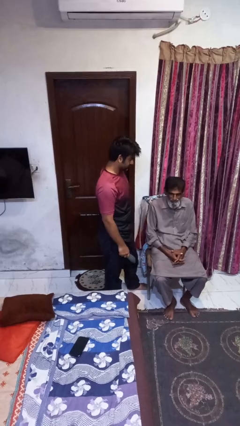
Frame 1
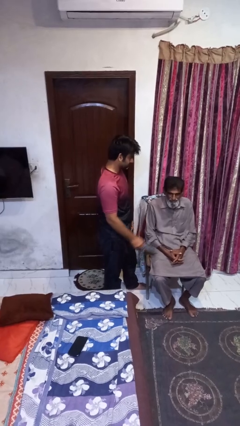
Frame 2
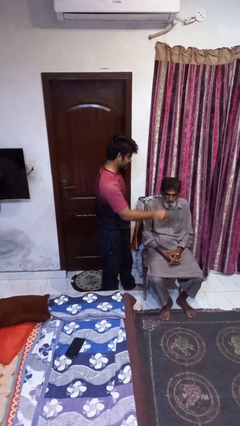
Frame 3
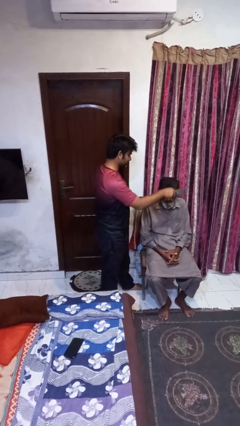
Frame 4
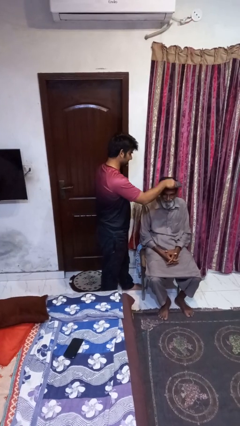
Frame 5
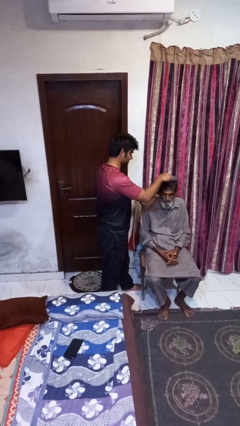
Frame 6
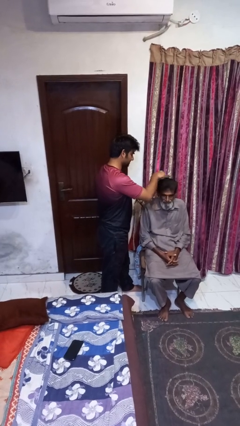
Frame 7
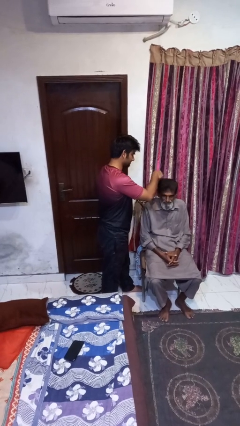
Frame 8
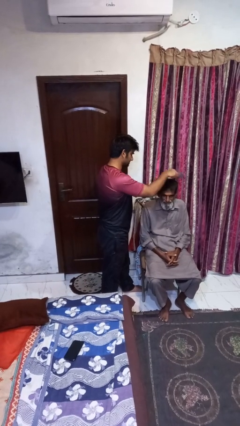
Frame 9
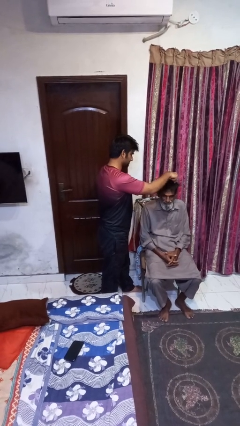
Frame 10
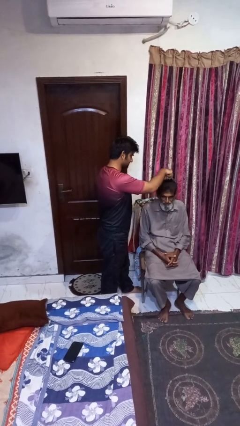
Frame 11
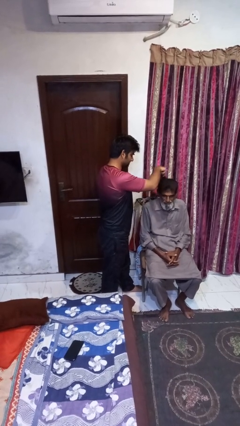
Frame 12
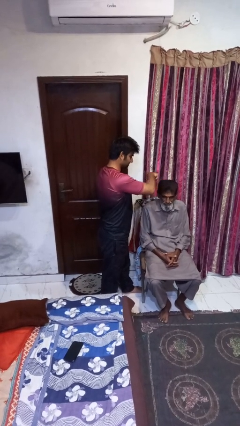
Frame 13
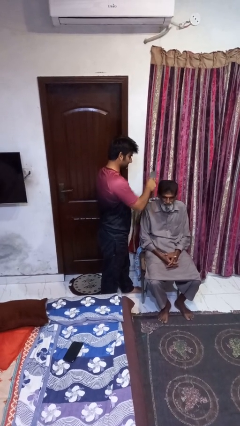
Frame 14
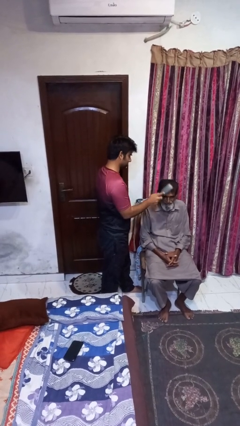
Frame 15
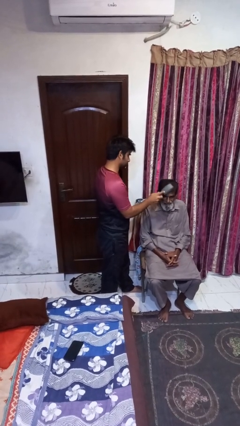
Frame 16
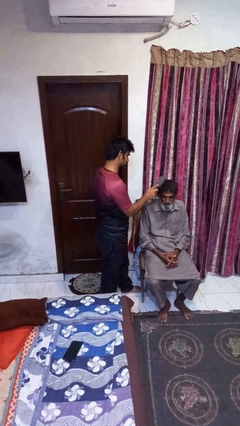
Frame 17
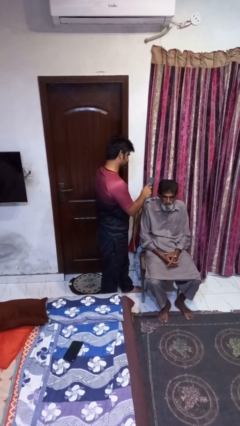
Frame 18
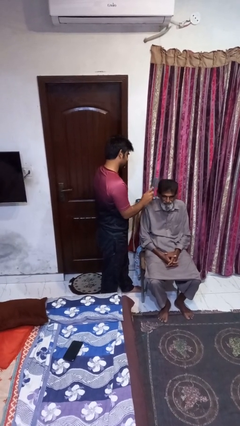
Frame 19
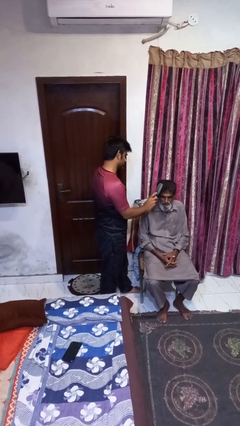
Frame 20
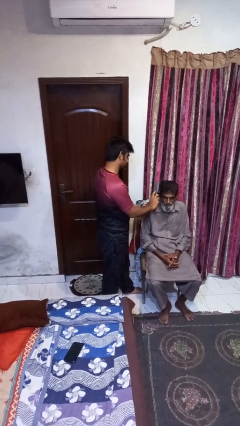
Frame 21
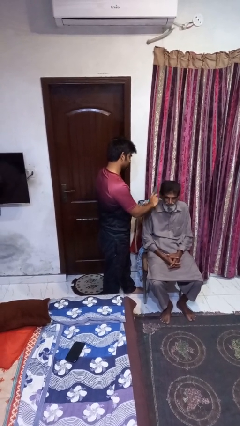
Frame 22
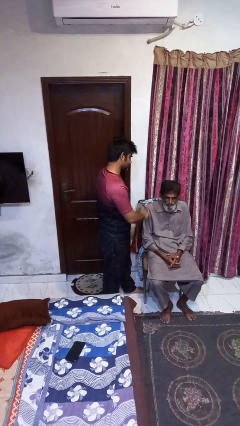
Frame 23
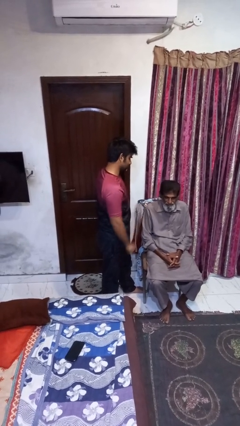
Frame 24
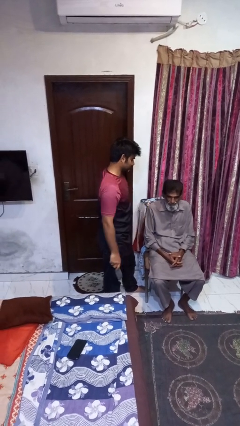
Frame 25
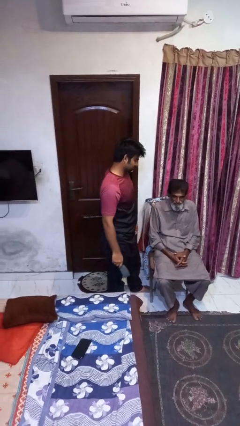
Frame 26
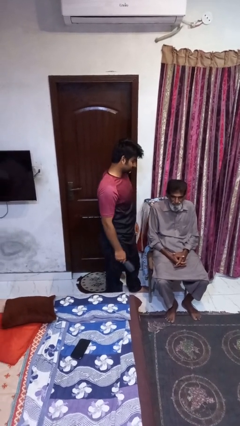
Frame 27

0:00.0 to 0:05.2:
person brushes hair of person

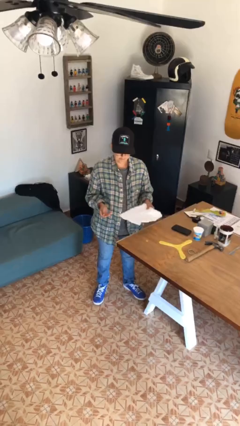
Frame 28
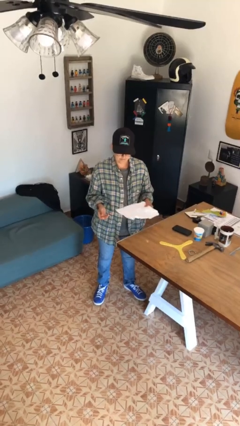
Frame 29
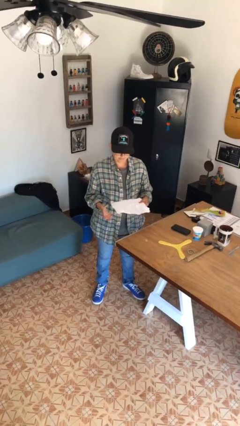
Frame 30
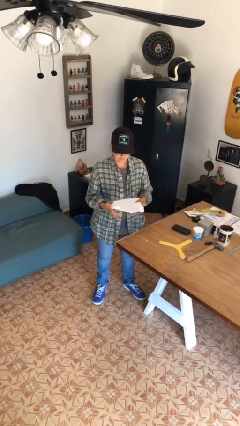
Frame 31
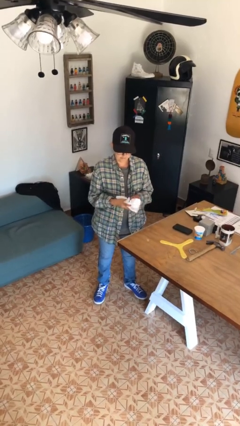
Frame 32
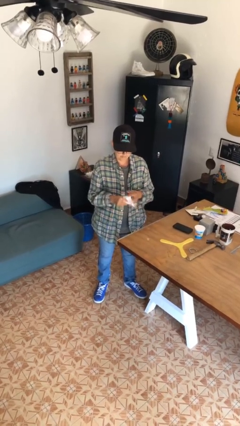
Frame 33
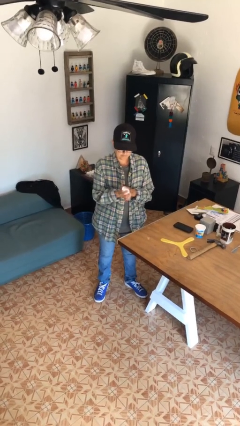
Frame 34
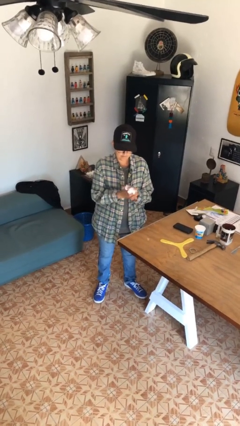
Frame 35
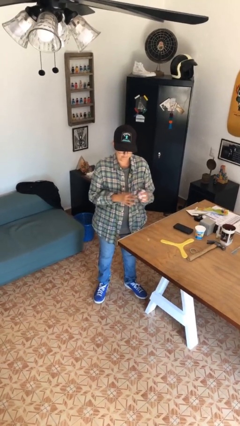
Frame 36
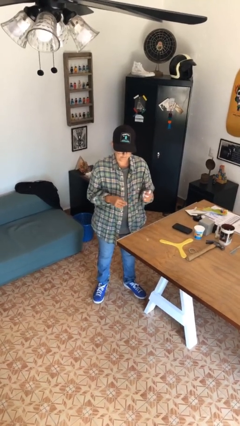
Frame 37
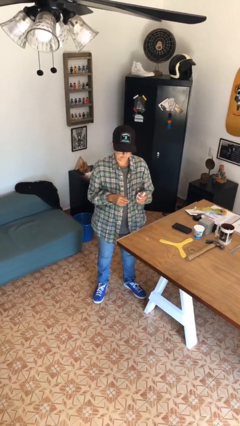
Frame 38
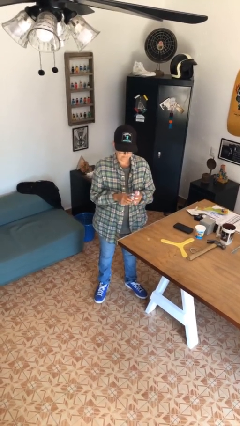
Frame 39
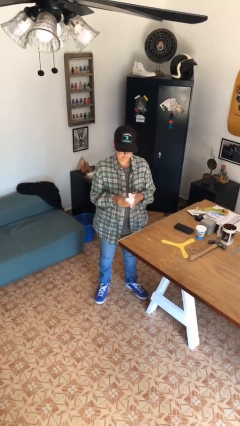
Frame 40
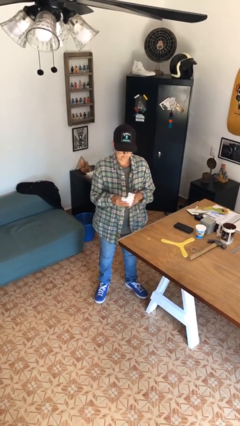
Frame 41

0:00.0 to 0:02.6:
person crumples paper

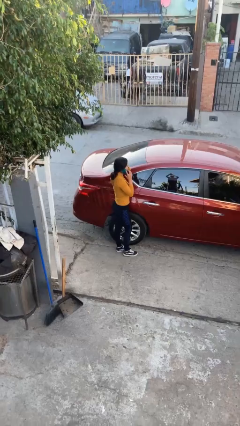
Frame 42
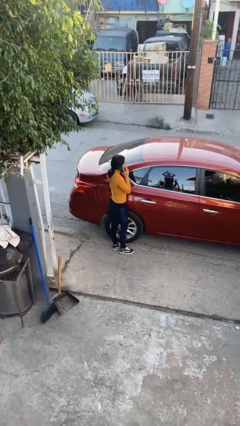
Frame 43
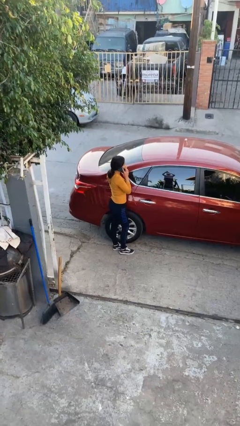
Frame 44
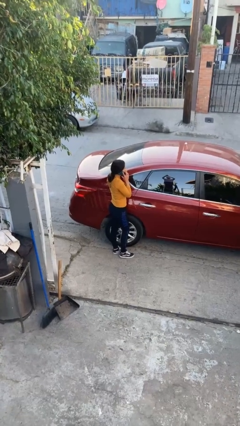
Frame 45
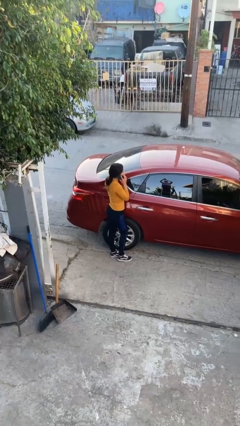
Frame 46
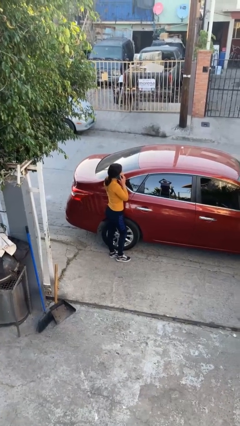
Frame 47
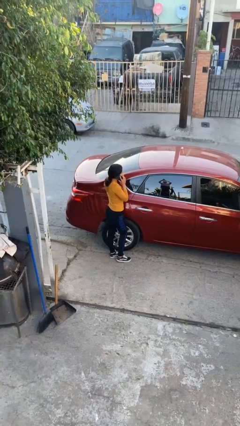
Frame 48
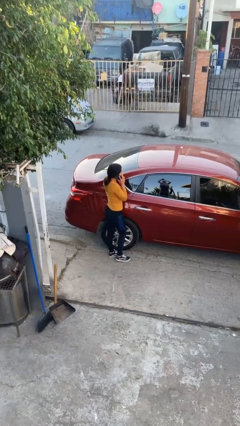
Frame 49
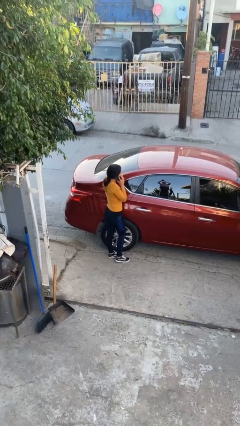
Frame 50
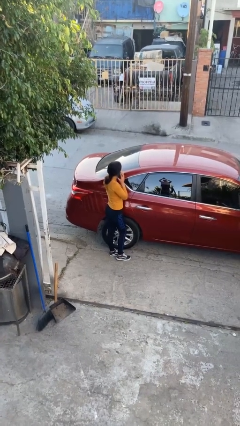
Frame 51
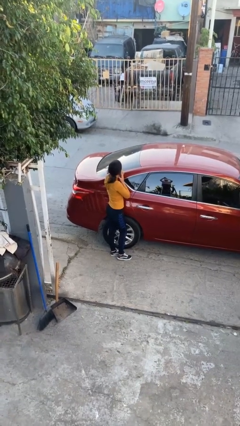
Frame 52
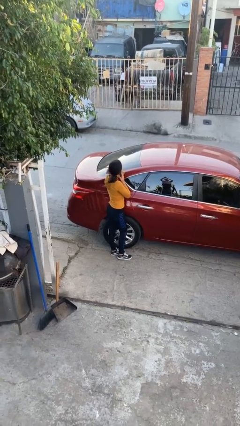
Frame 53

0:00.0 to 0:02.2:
person leans against car

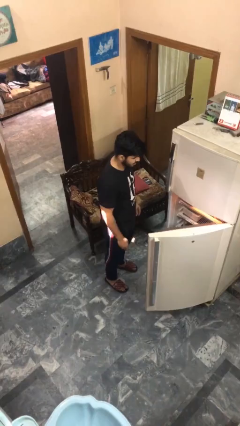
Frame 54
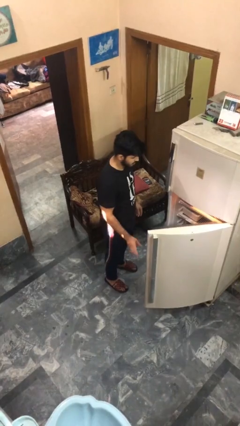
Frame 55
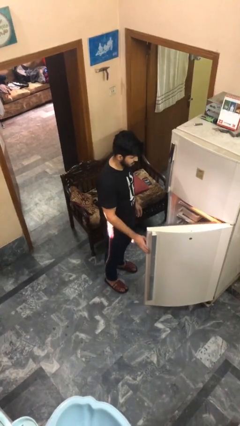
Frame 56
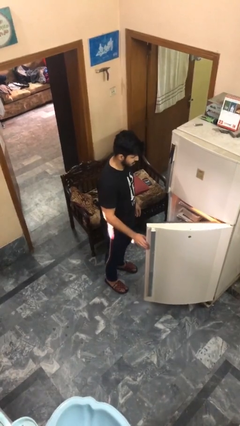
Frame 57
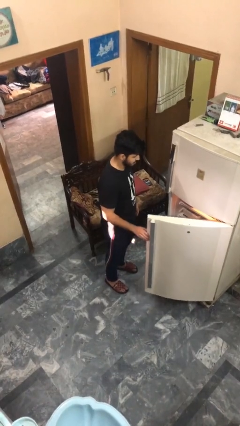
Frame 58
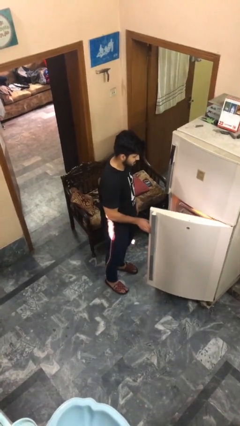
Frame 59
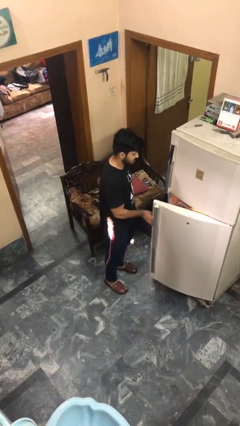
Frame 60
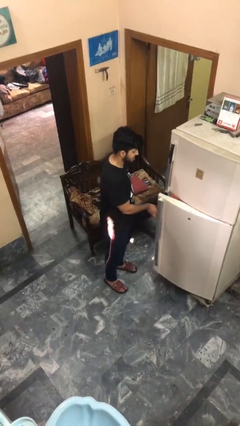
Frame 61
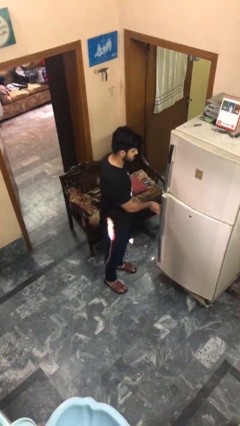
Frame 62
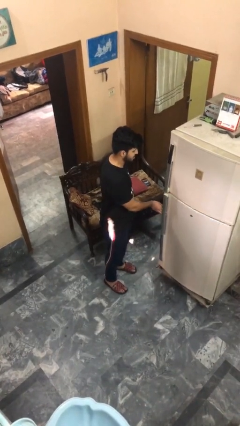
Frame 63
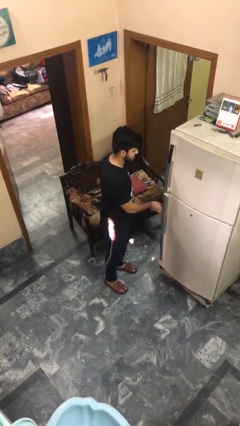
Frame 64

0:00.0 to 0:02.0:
person closes refrigerator

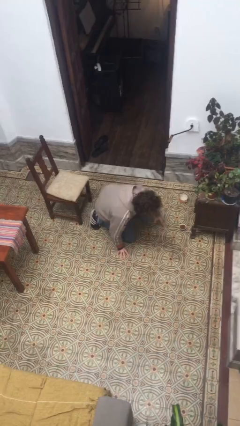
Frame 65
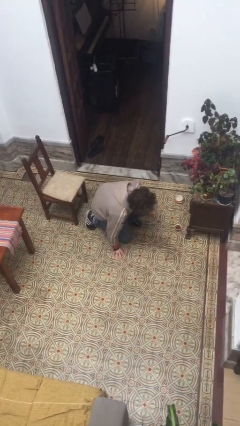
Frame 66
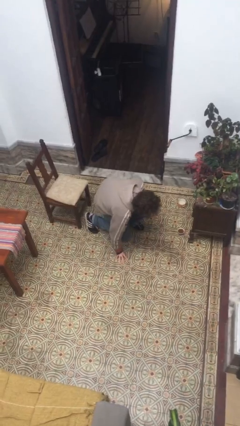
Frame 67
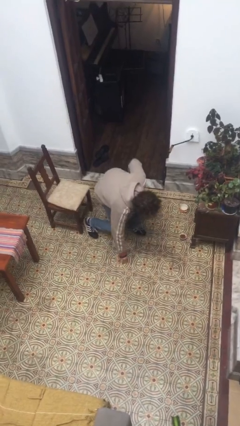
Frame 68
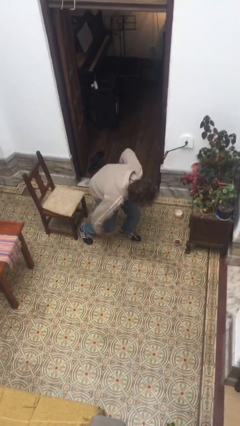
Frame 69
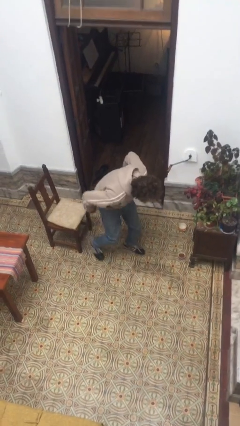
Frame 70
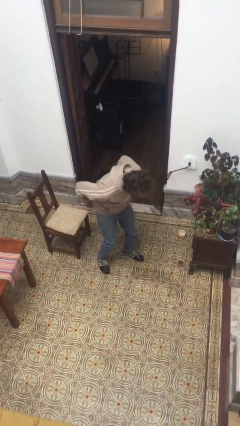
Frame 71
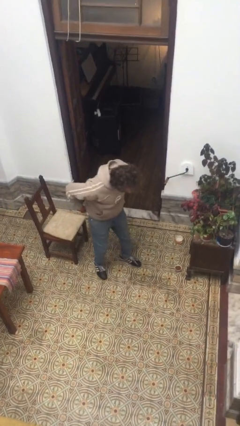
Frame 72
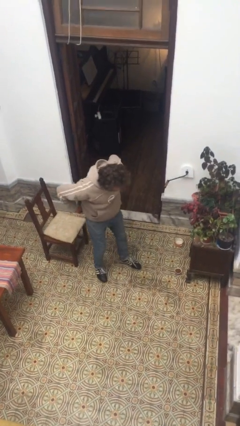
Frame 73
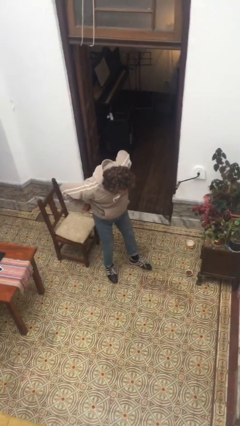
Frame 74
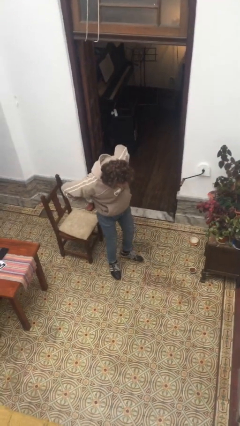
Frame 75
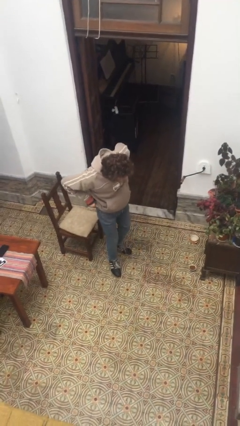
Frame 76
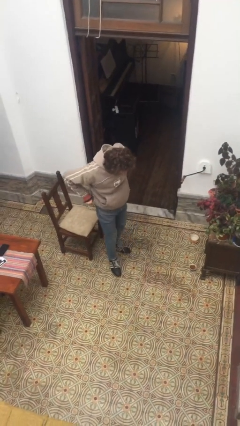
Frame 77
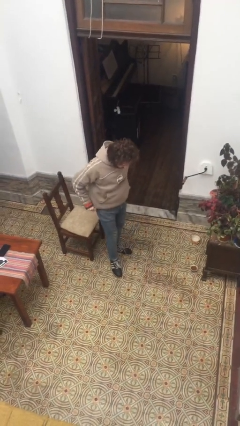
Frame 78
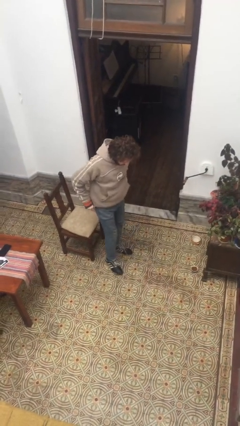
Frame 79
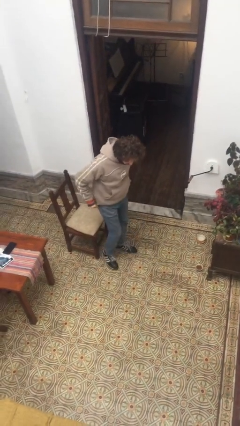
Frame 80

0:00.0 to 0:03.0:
person stands up from floor

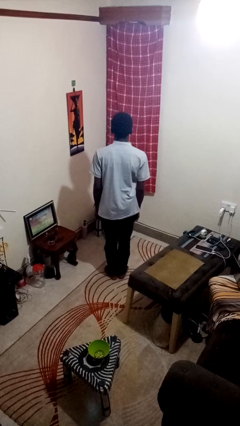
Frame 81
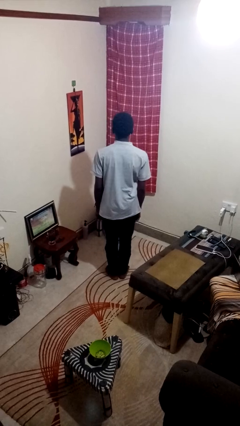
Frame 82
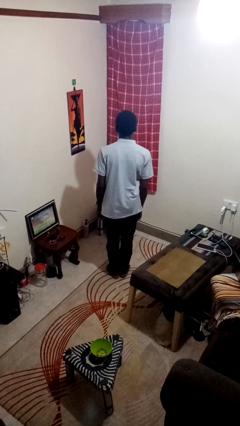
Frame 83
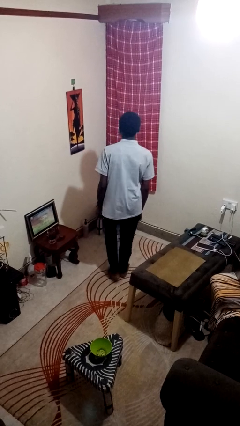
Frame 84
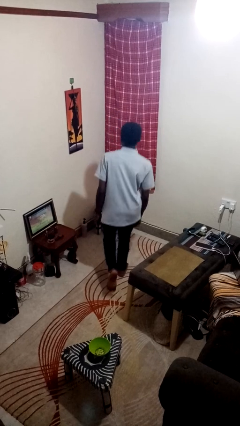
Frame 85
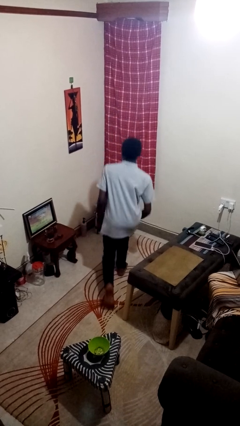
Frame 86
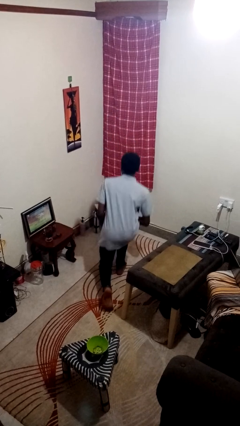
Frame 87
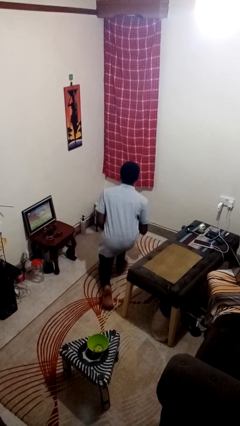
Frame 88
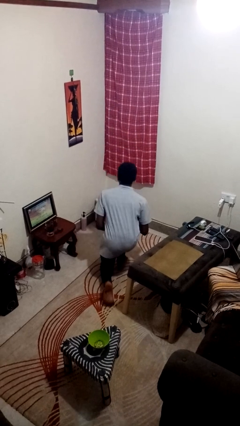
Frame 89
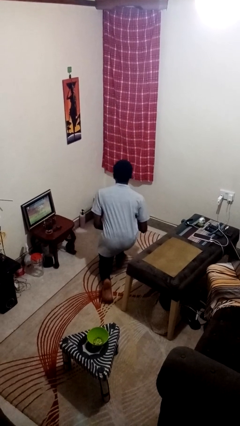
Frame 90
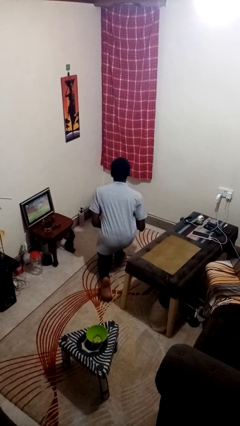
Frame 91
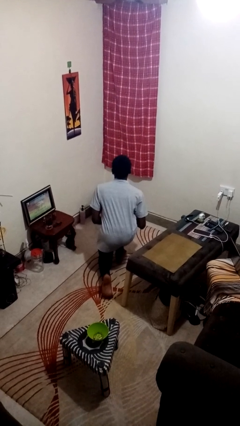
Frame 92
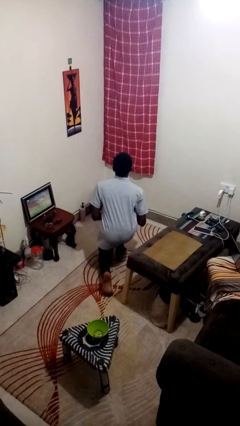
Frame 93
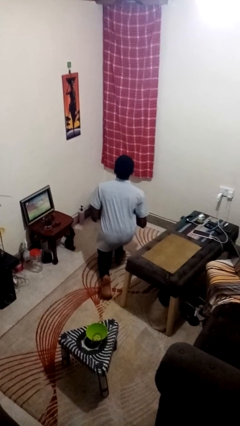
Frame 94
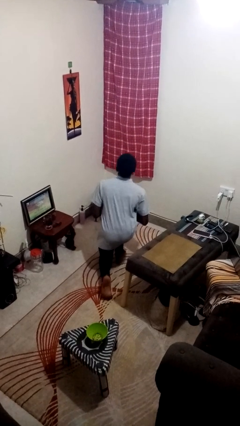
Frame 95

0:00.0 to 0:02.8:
person exercises with lunges
